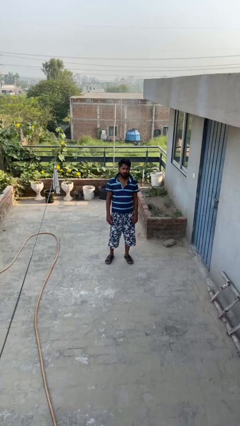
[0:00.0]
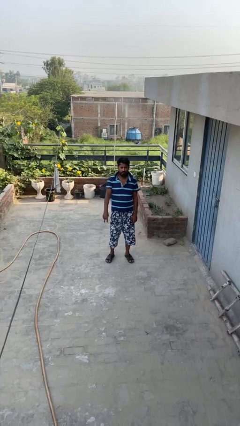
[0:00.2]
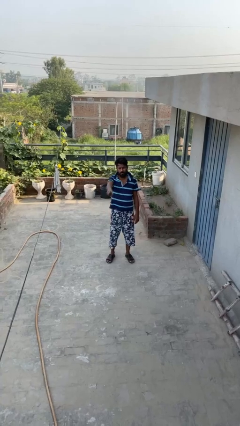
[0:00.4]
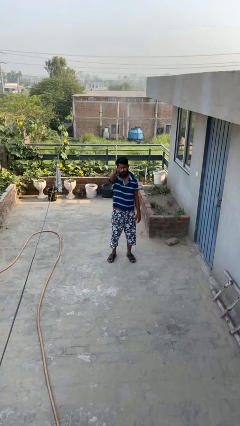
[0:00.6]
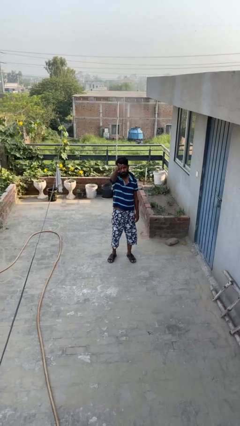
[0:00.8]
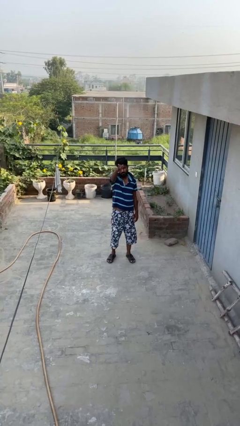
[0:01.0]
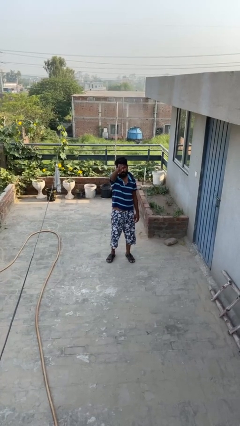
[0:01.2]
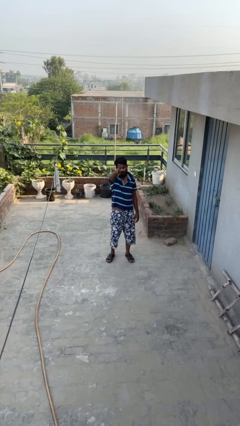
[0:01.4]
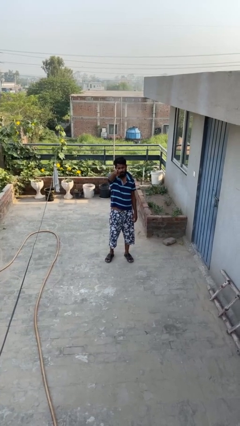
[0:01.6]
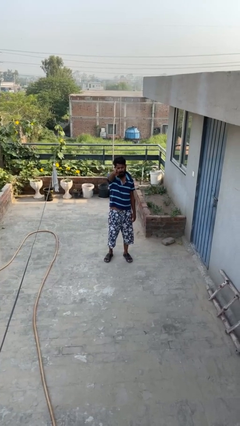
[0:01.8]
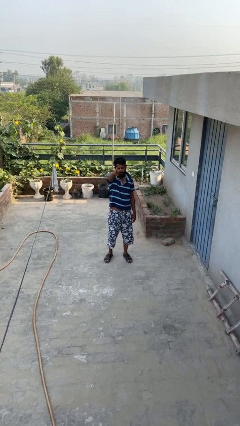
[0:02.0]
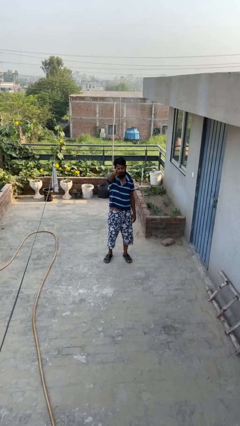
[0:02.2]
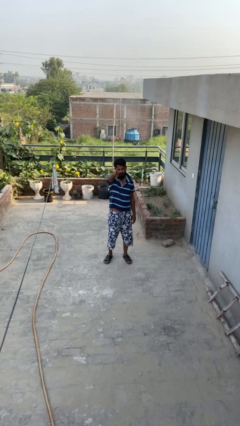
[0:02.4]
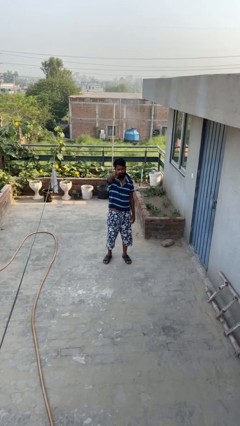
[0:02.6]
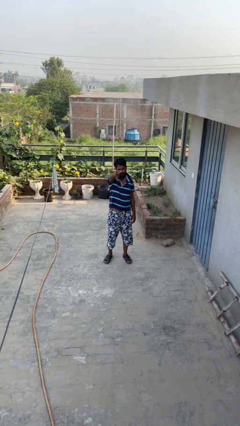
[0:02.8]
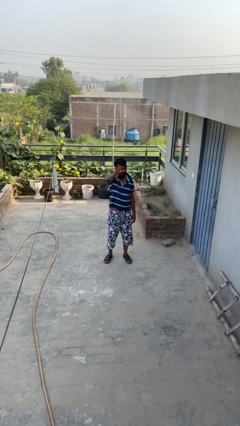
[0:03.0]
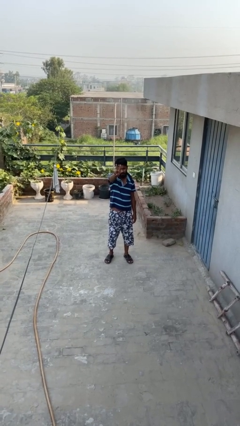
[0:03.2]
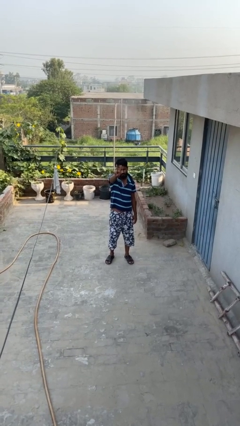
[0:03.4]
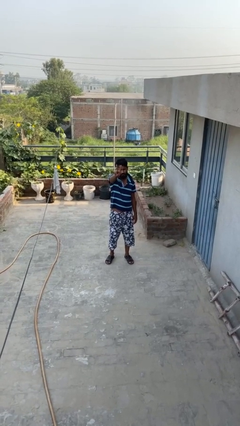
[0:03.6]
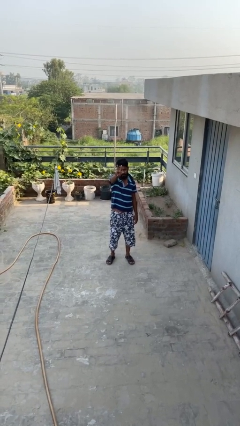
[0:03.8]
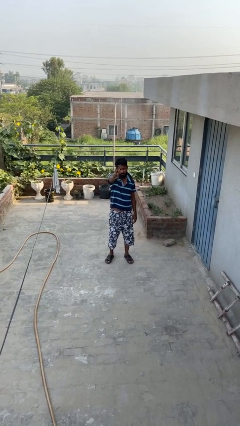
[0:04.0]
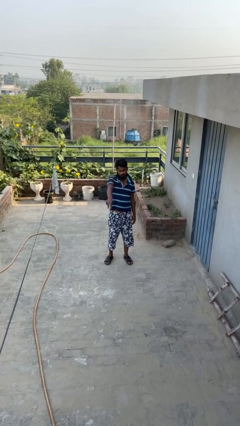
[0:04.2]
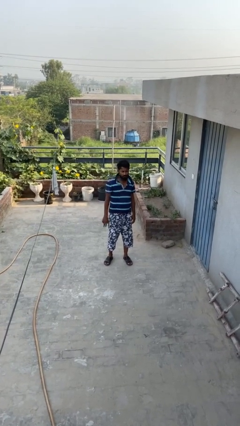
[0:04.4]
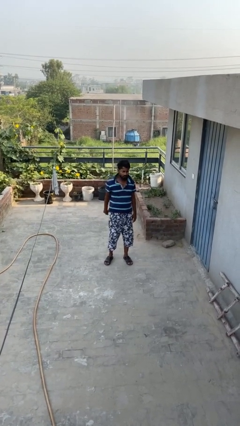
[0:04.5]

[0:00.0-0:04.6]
person gestures peace

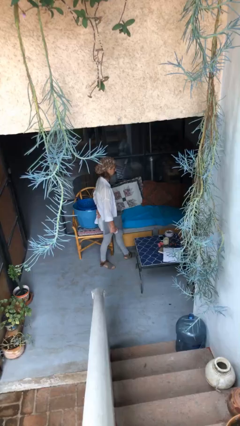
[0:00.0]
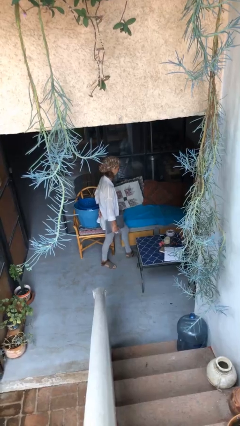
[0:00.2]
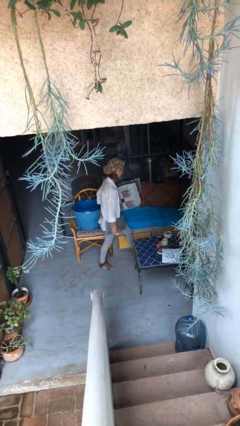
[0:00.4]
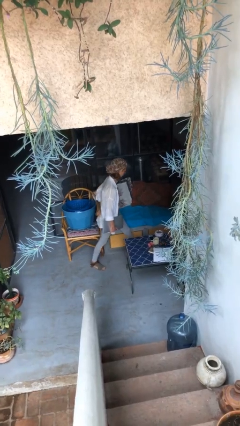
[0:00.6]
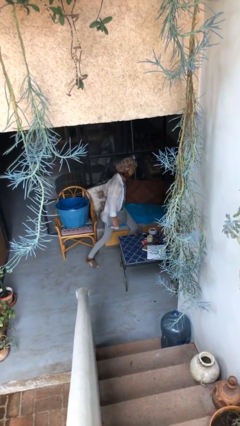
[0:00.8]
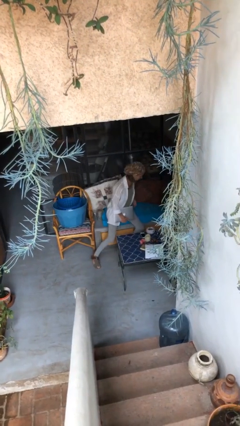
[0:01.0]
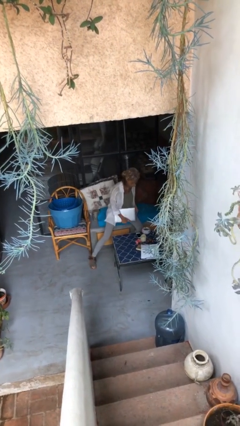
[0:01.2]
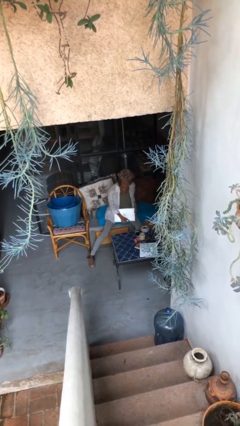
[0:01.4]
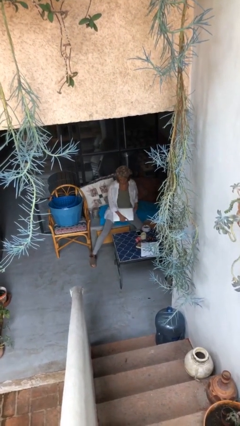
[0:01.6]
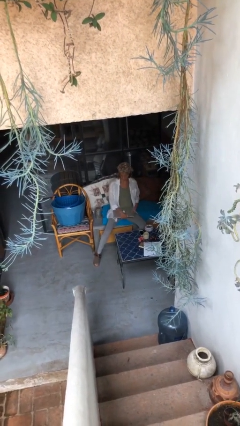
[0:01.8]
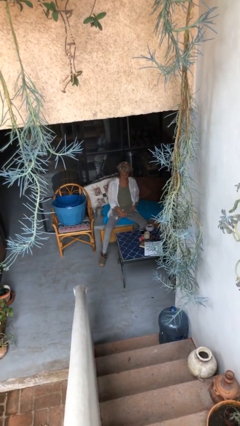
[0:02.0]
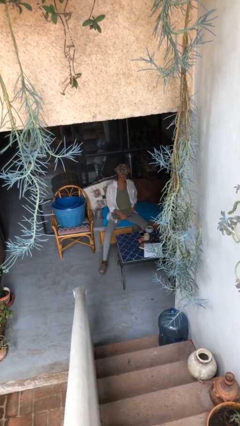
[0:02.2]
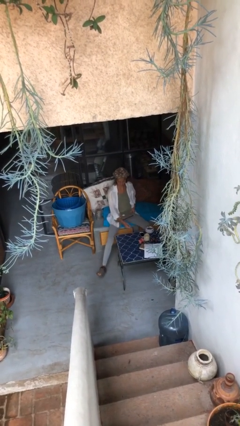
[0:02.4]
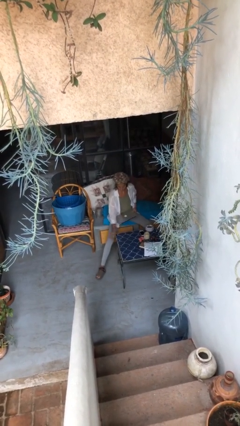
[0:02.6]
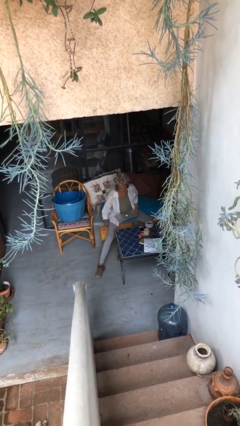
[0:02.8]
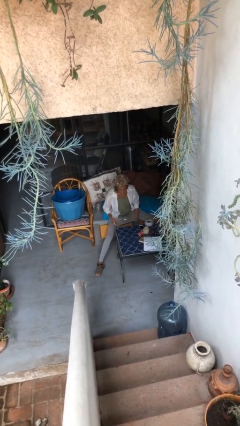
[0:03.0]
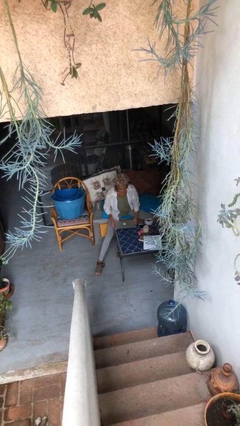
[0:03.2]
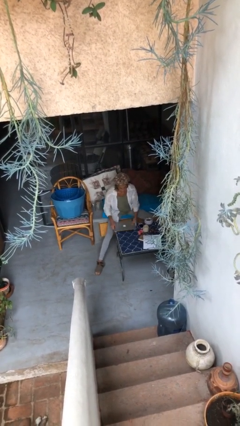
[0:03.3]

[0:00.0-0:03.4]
person sits down

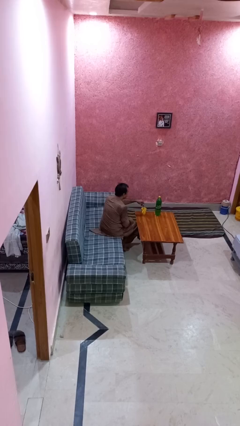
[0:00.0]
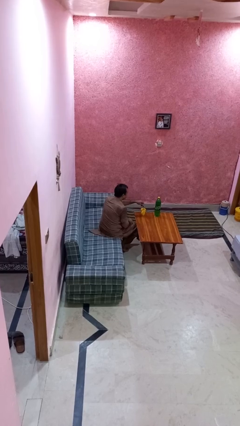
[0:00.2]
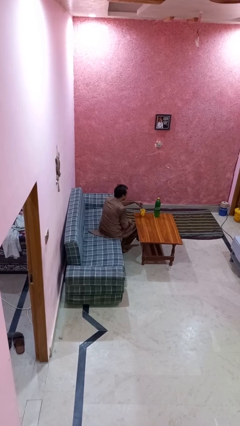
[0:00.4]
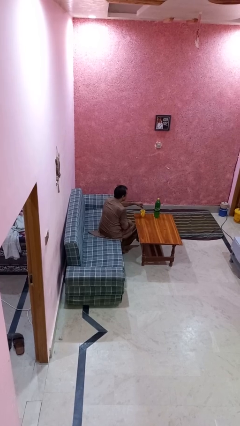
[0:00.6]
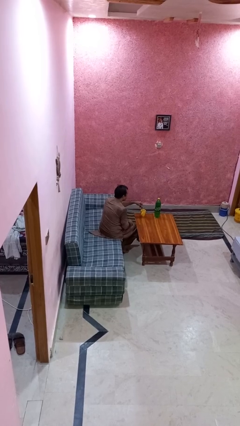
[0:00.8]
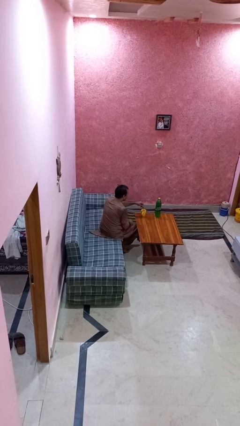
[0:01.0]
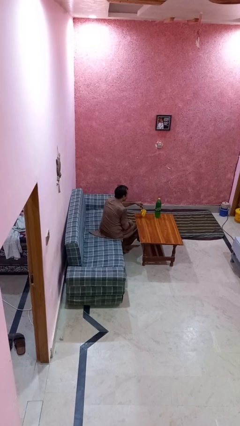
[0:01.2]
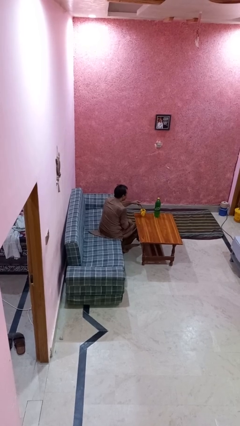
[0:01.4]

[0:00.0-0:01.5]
person stirs mug

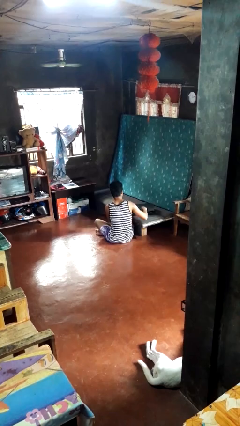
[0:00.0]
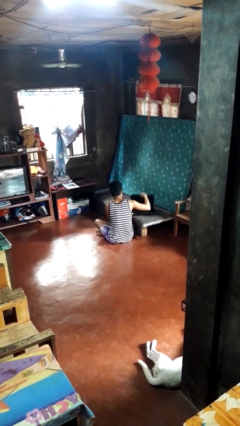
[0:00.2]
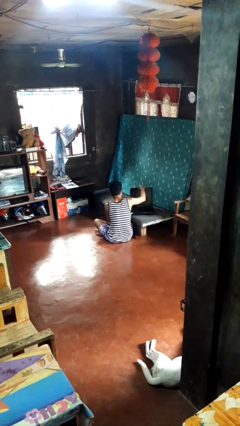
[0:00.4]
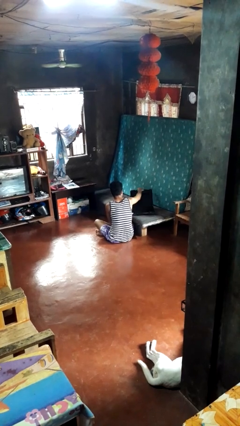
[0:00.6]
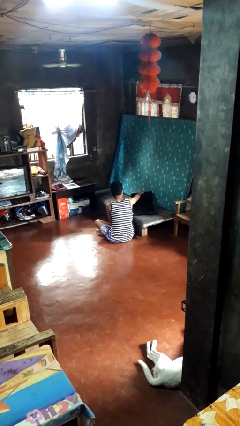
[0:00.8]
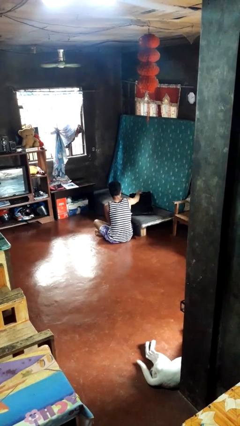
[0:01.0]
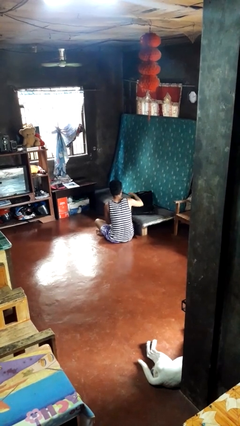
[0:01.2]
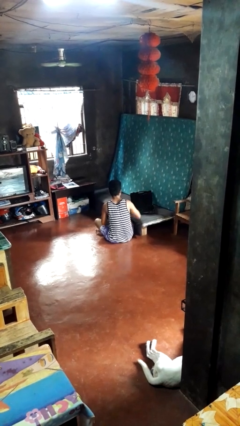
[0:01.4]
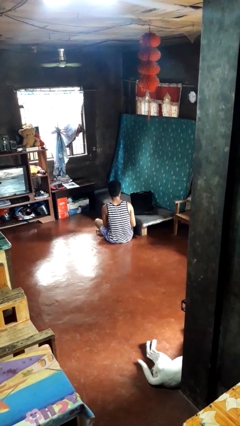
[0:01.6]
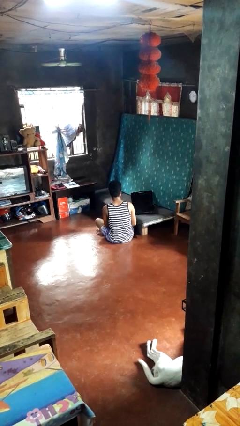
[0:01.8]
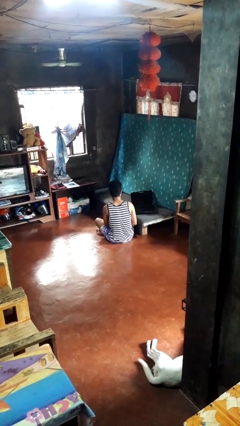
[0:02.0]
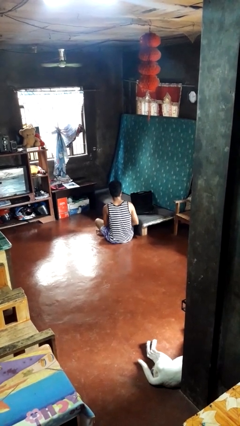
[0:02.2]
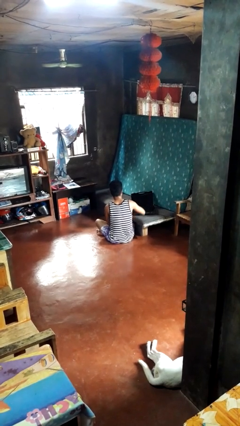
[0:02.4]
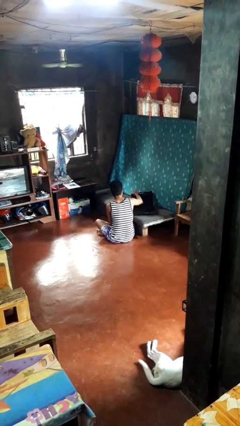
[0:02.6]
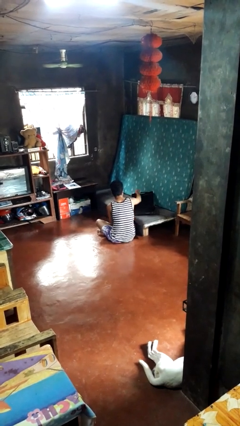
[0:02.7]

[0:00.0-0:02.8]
person opens suitcase

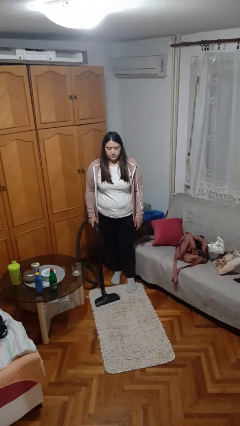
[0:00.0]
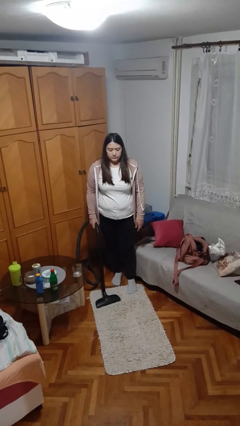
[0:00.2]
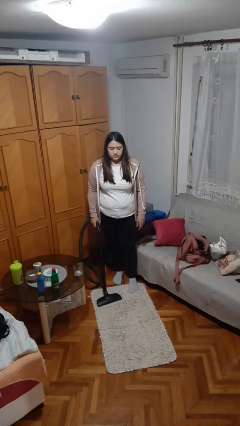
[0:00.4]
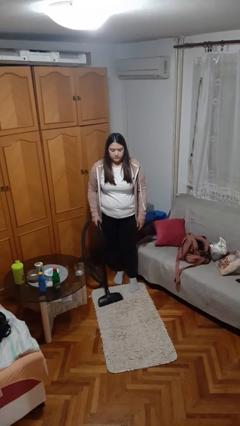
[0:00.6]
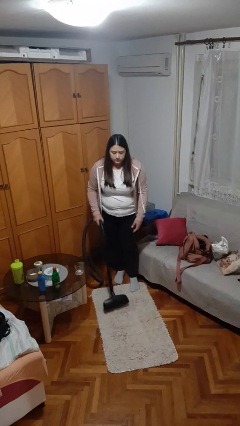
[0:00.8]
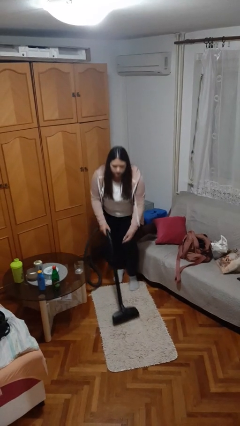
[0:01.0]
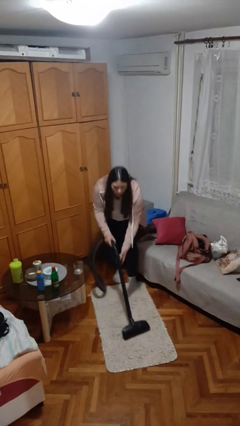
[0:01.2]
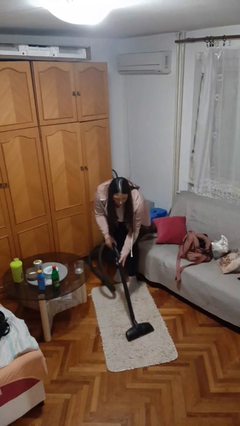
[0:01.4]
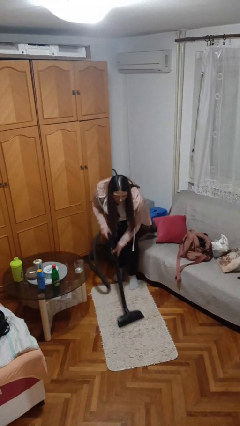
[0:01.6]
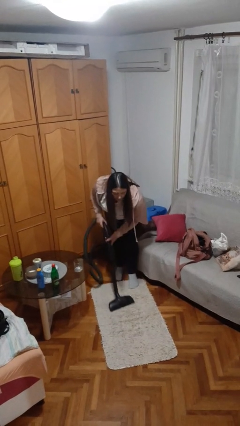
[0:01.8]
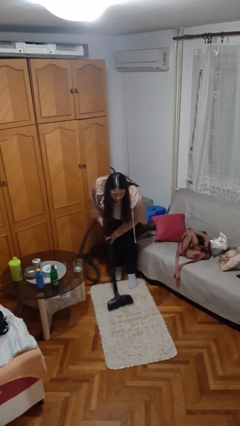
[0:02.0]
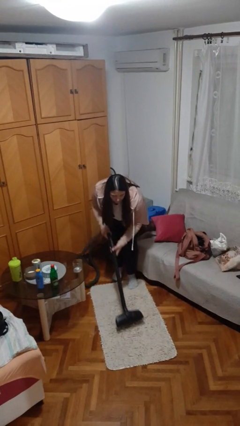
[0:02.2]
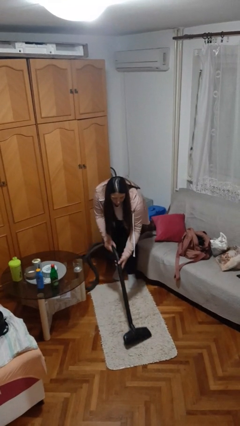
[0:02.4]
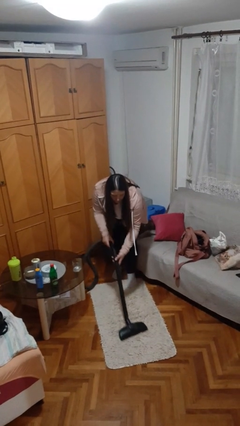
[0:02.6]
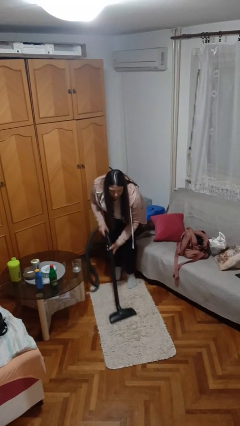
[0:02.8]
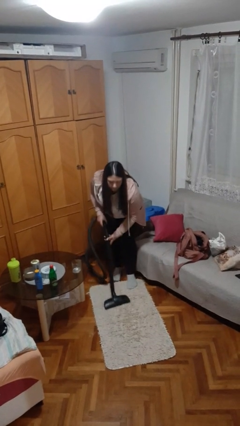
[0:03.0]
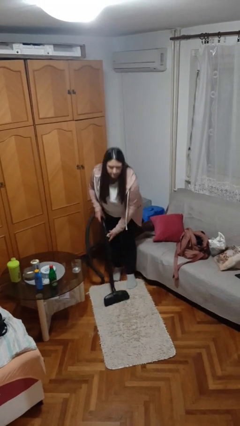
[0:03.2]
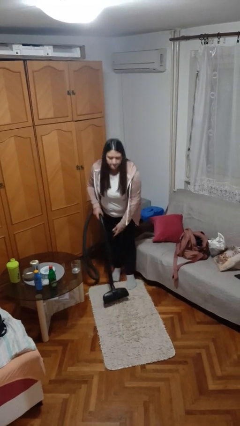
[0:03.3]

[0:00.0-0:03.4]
person vacuums carpet

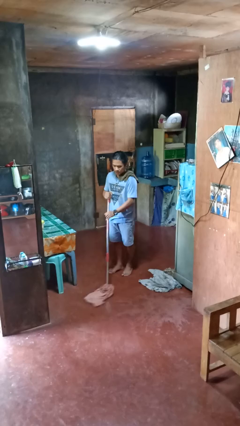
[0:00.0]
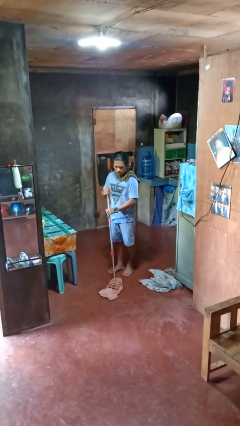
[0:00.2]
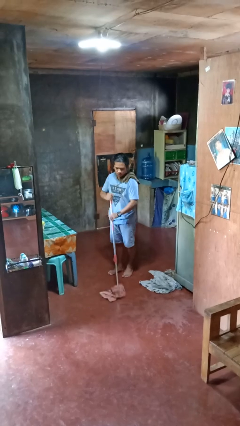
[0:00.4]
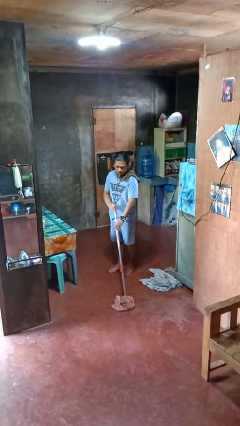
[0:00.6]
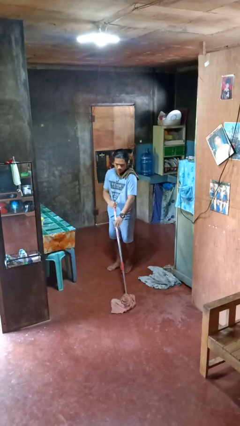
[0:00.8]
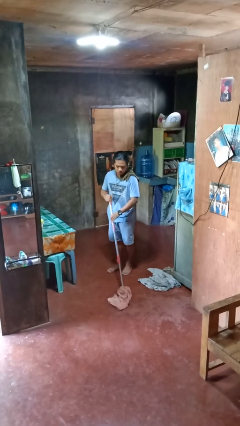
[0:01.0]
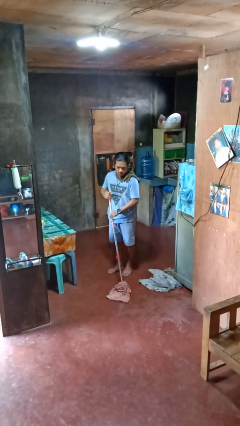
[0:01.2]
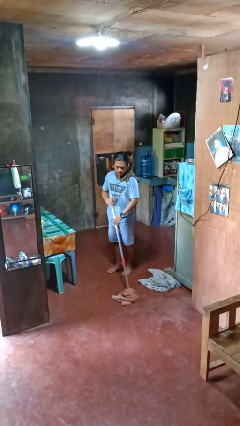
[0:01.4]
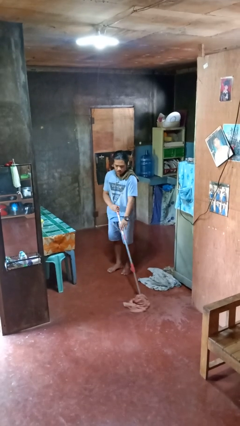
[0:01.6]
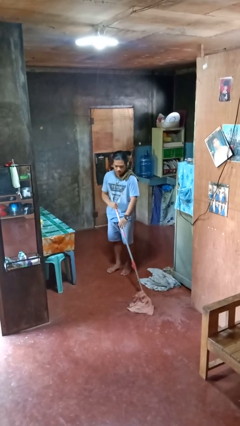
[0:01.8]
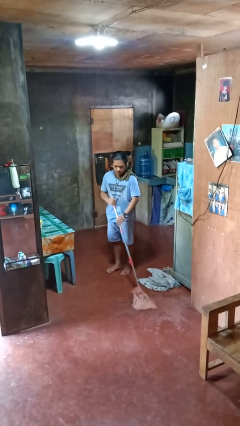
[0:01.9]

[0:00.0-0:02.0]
person mops
